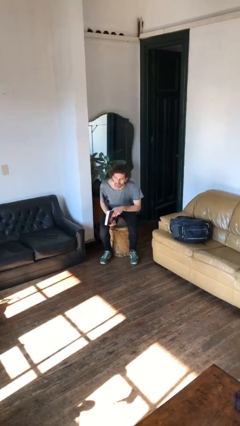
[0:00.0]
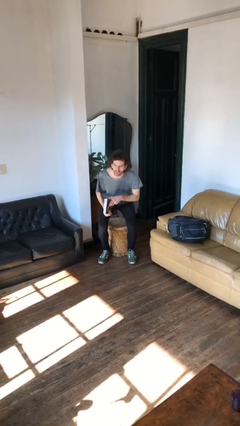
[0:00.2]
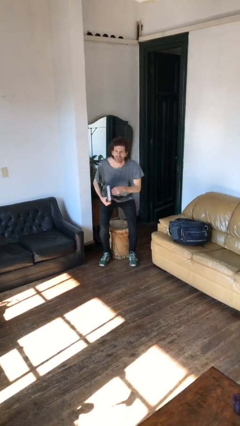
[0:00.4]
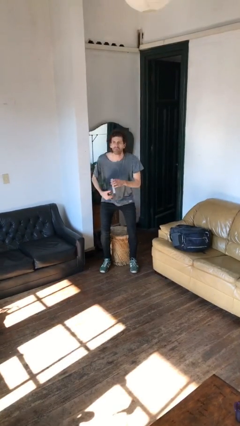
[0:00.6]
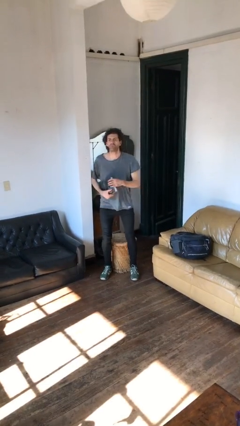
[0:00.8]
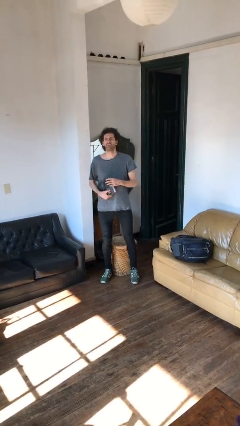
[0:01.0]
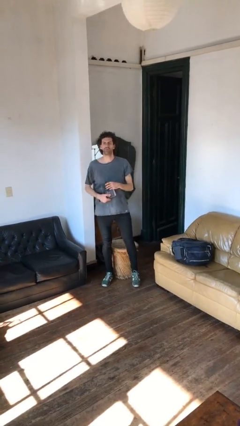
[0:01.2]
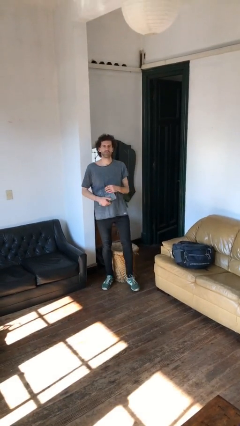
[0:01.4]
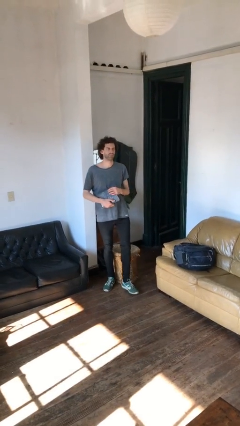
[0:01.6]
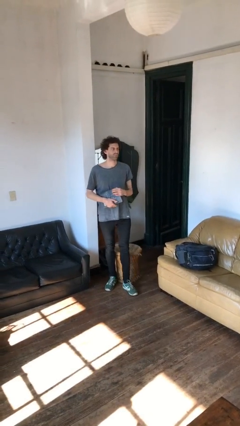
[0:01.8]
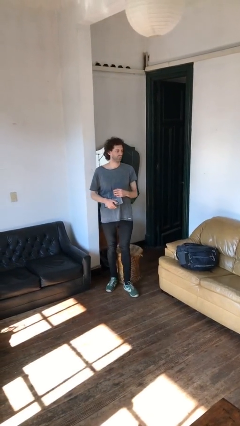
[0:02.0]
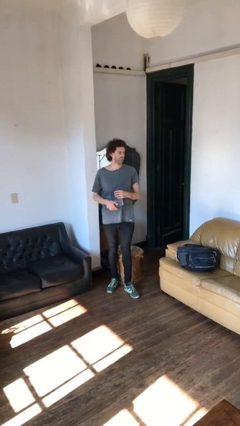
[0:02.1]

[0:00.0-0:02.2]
person stands up

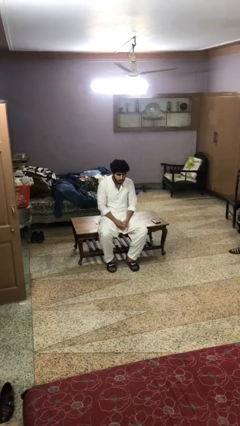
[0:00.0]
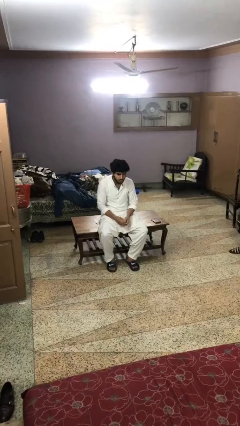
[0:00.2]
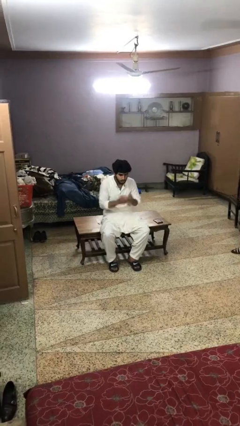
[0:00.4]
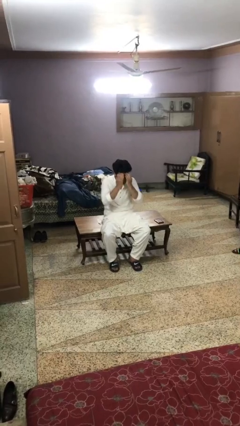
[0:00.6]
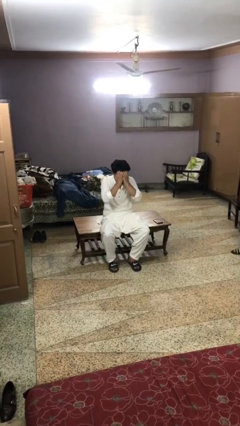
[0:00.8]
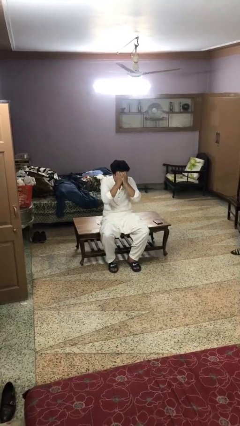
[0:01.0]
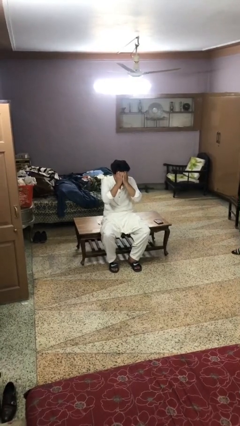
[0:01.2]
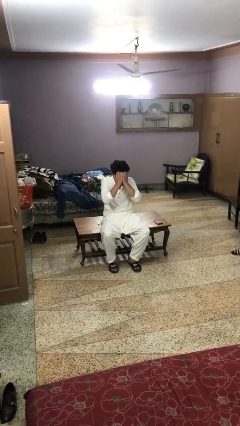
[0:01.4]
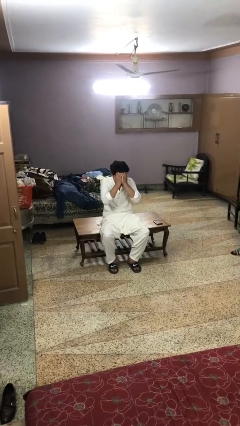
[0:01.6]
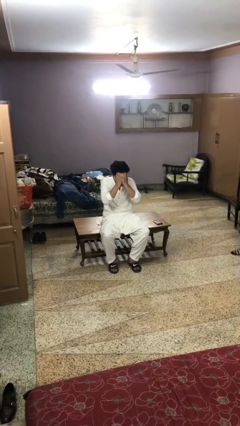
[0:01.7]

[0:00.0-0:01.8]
person covers face with hands

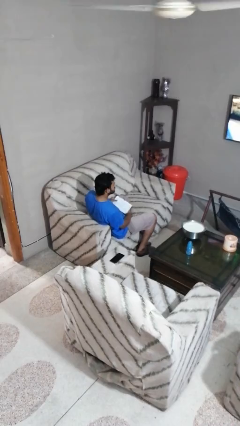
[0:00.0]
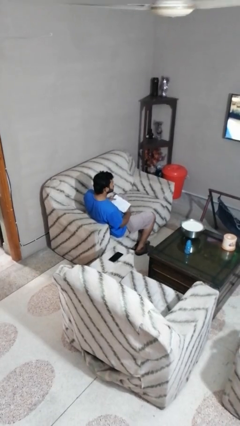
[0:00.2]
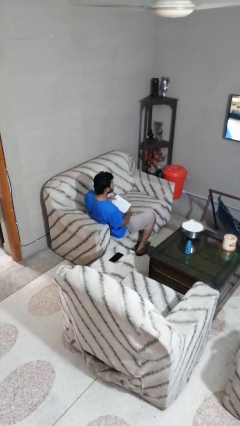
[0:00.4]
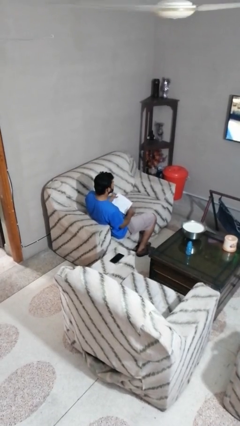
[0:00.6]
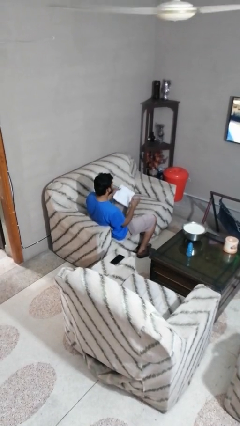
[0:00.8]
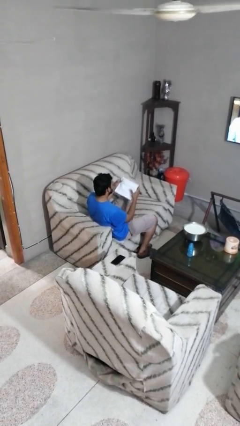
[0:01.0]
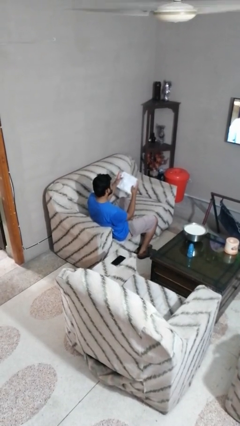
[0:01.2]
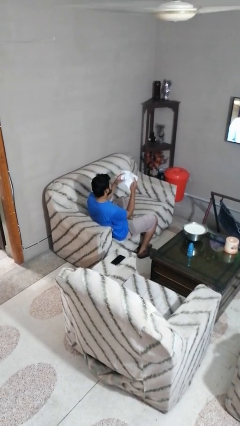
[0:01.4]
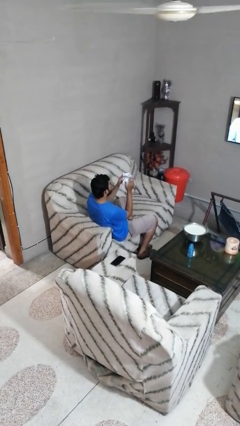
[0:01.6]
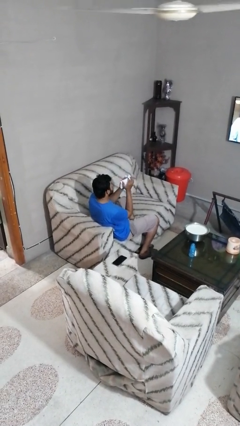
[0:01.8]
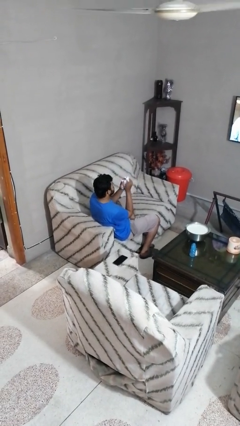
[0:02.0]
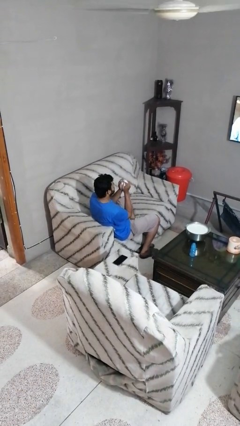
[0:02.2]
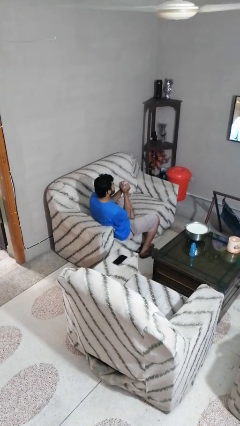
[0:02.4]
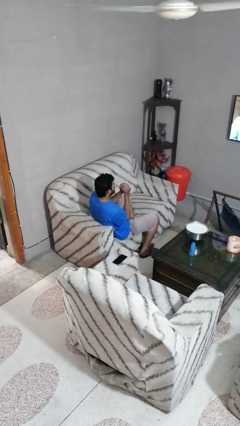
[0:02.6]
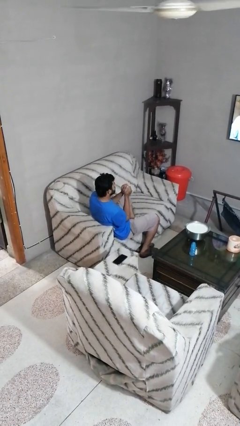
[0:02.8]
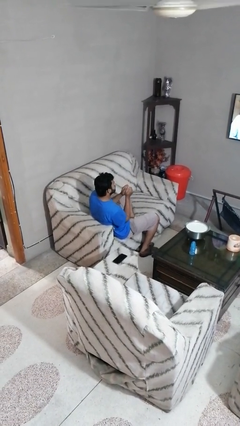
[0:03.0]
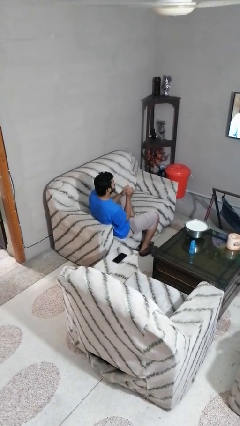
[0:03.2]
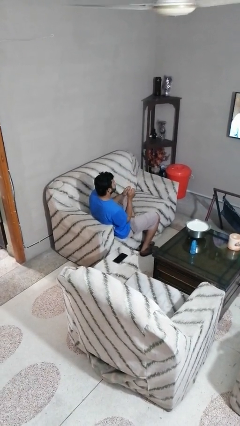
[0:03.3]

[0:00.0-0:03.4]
person crumples paper

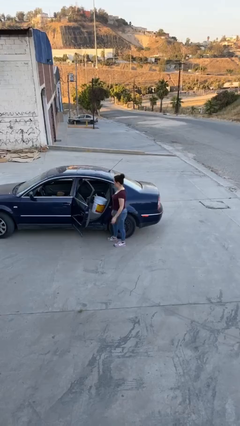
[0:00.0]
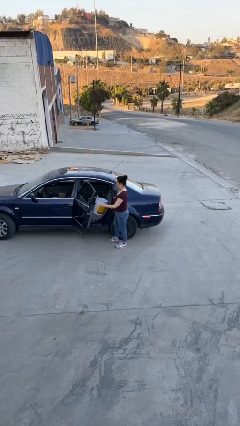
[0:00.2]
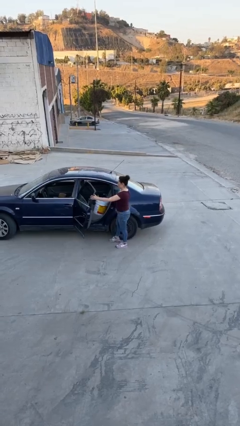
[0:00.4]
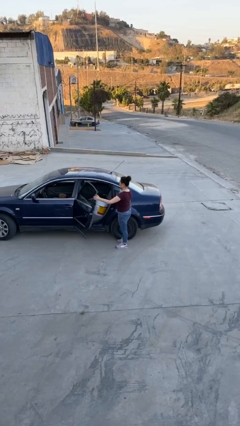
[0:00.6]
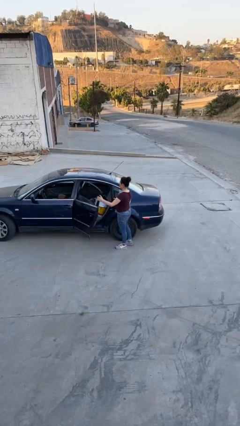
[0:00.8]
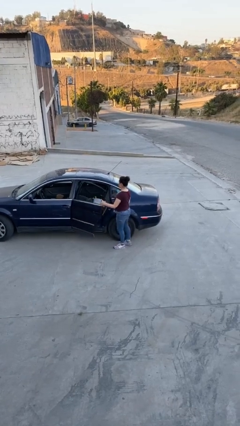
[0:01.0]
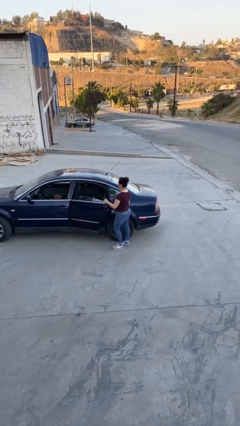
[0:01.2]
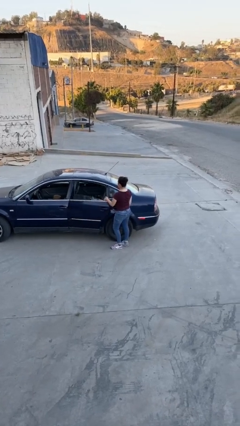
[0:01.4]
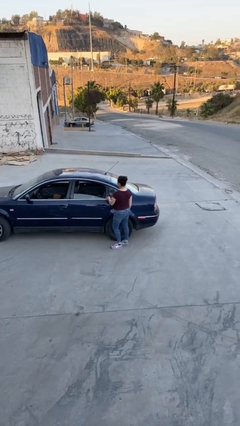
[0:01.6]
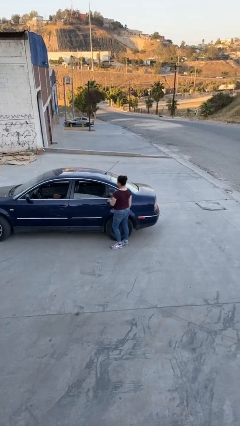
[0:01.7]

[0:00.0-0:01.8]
person closes car door

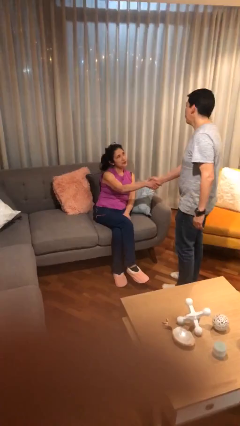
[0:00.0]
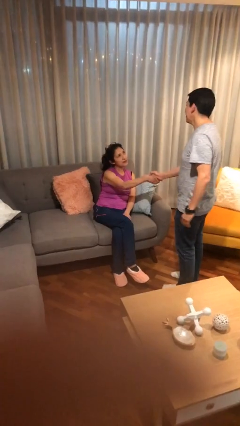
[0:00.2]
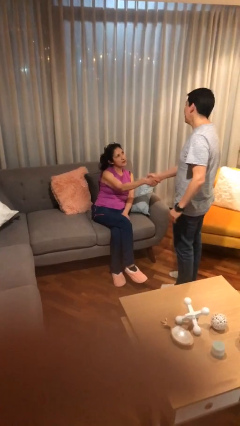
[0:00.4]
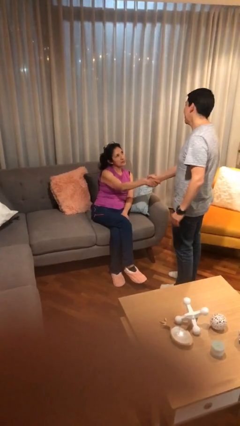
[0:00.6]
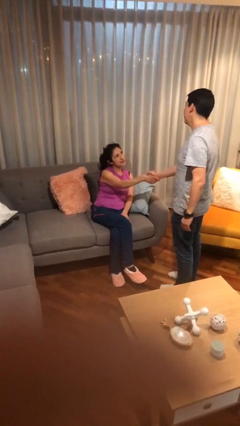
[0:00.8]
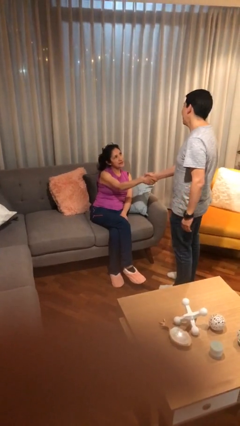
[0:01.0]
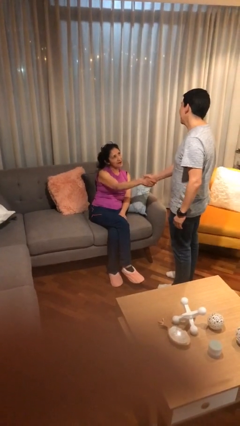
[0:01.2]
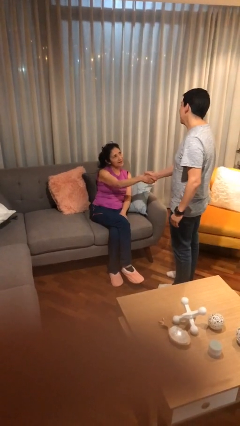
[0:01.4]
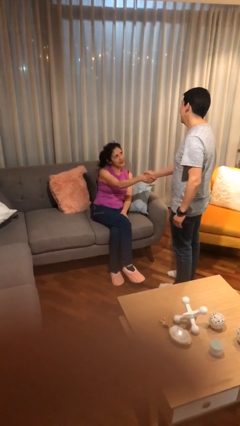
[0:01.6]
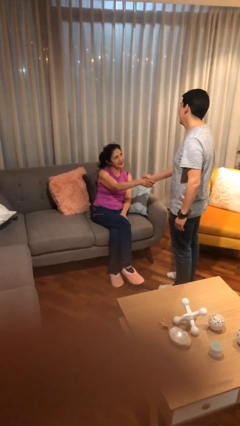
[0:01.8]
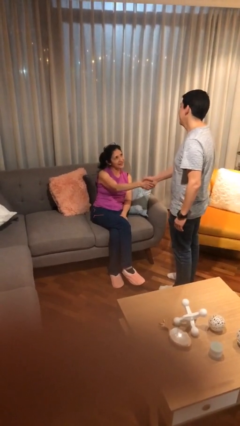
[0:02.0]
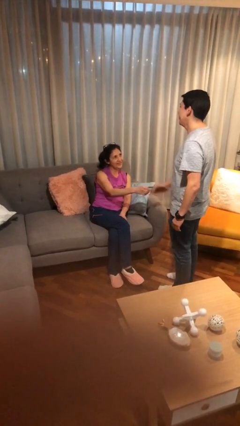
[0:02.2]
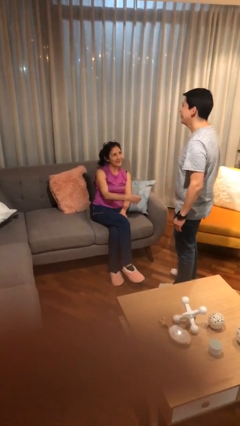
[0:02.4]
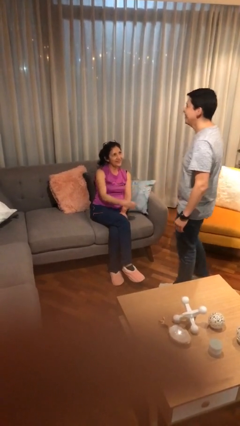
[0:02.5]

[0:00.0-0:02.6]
person shakes hand

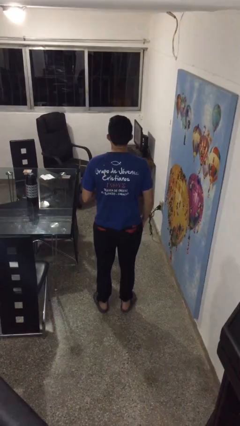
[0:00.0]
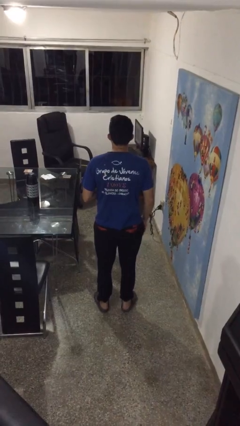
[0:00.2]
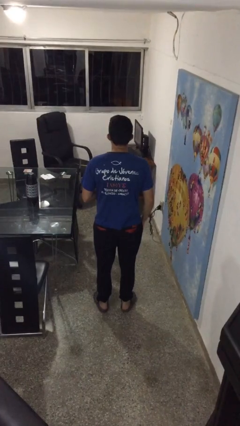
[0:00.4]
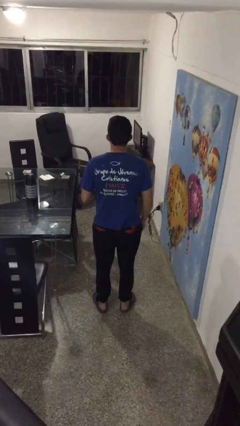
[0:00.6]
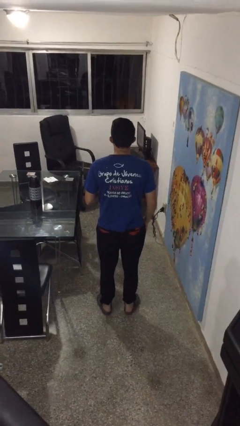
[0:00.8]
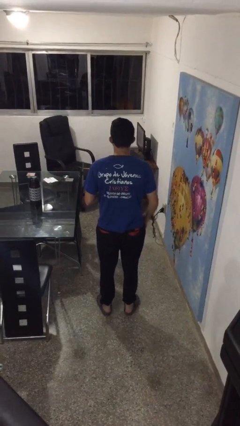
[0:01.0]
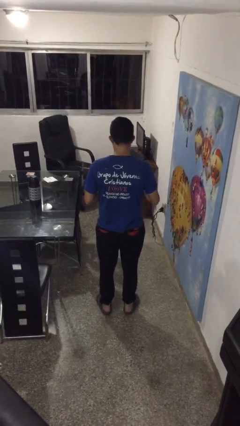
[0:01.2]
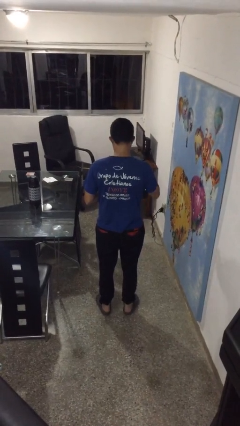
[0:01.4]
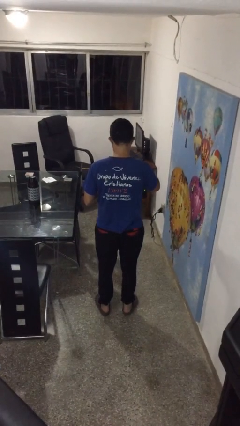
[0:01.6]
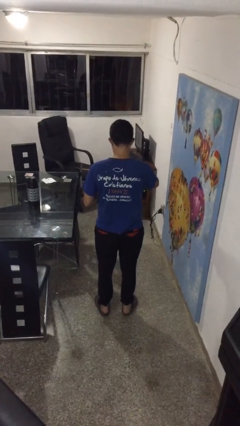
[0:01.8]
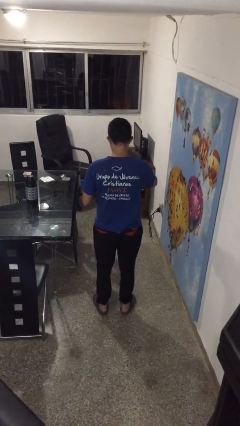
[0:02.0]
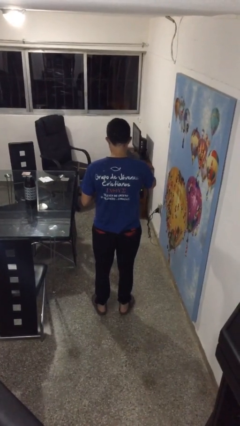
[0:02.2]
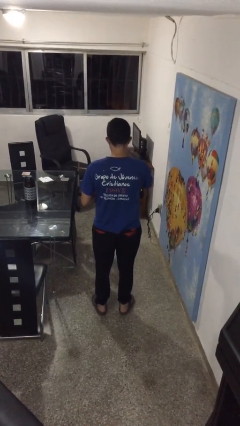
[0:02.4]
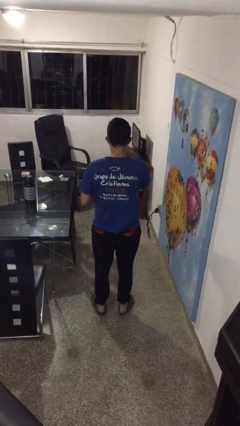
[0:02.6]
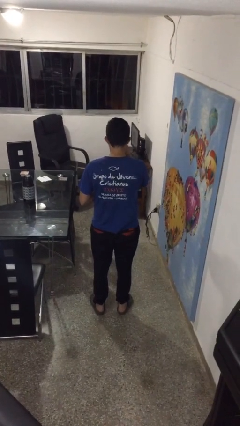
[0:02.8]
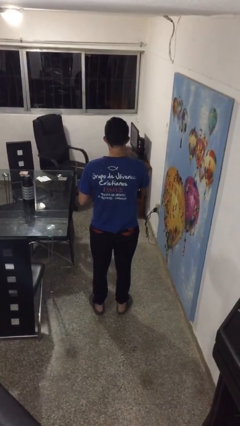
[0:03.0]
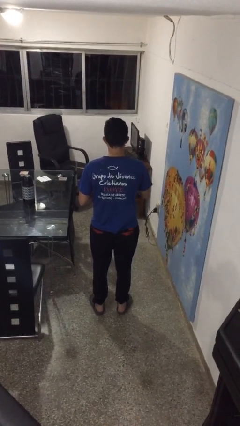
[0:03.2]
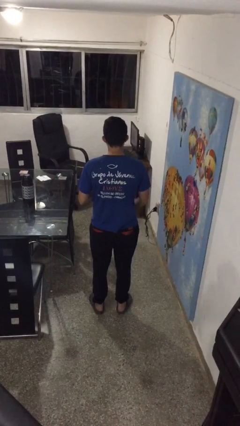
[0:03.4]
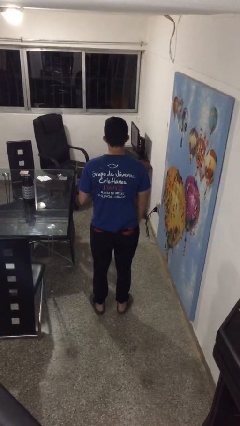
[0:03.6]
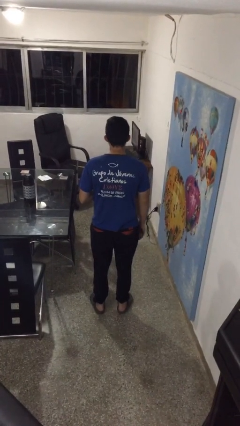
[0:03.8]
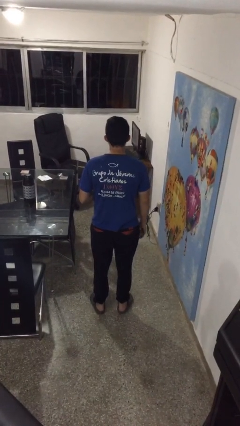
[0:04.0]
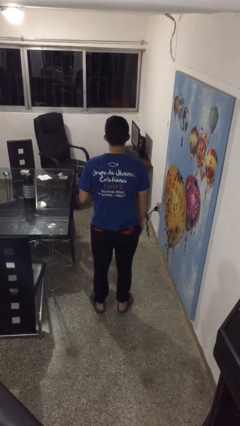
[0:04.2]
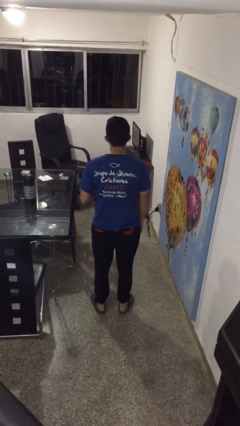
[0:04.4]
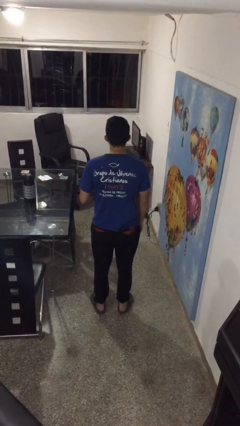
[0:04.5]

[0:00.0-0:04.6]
person eats snack from bag

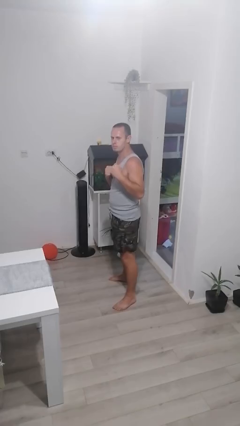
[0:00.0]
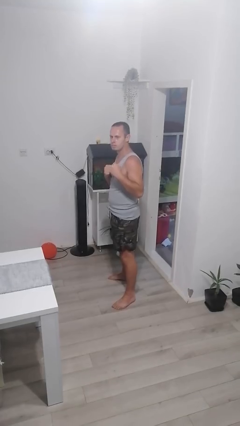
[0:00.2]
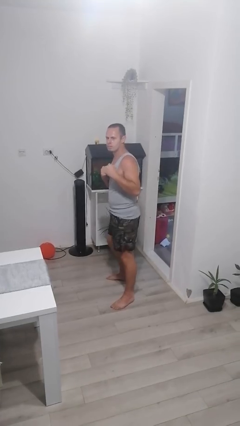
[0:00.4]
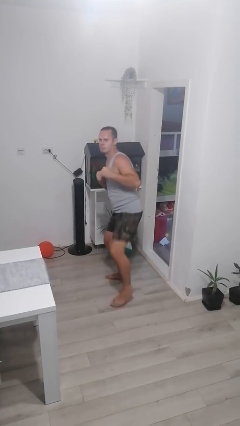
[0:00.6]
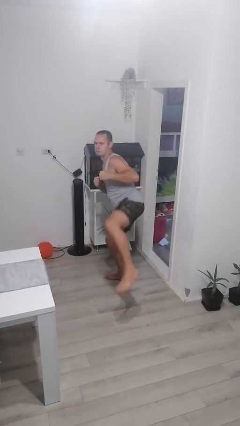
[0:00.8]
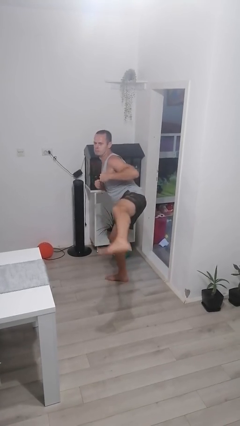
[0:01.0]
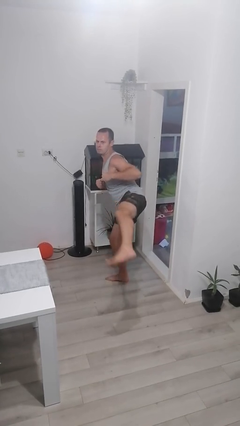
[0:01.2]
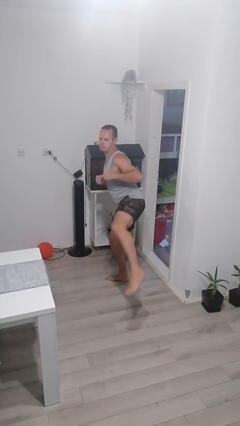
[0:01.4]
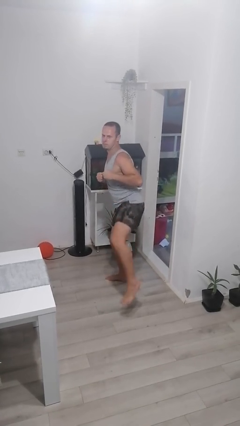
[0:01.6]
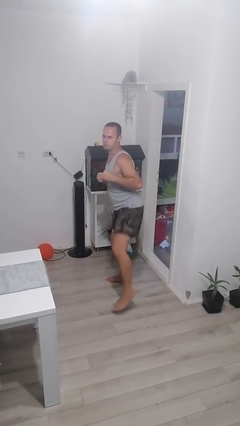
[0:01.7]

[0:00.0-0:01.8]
person karate kicks
